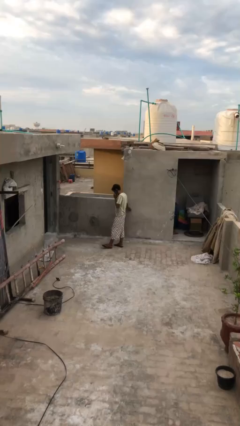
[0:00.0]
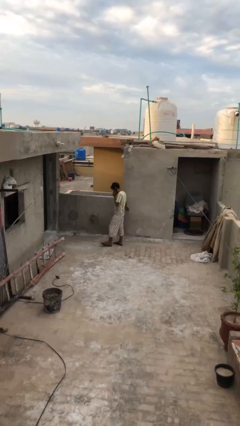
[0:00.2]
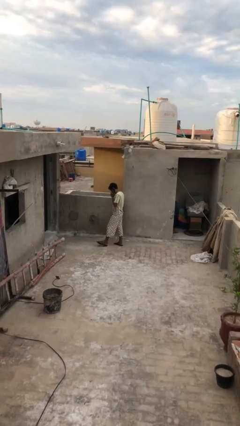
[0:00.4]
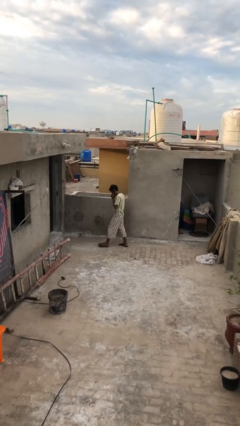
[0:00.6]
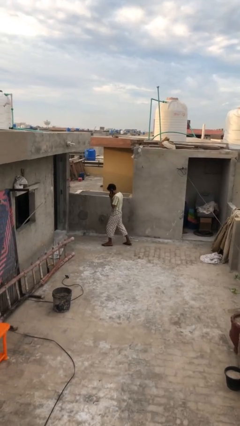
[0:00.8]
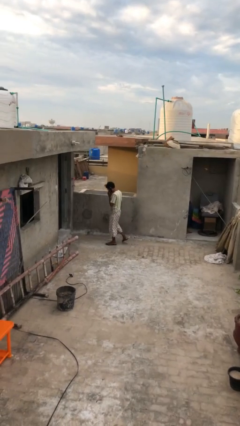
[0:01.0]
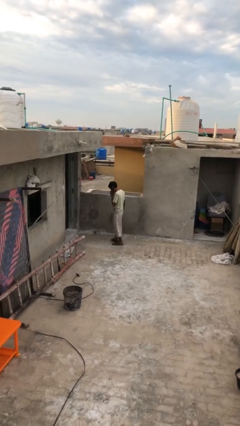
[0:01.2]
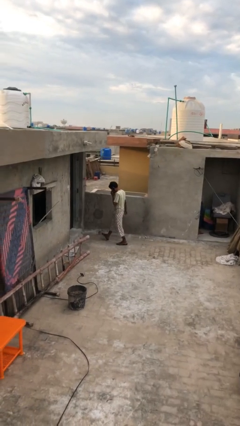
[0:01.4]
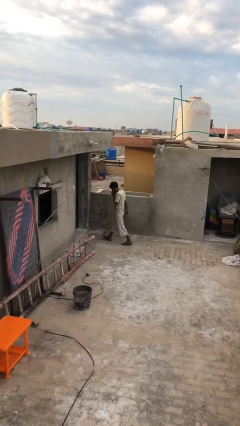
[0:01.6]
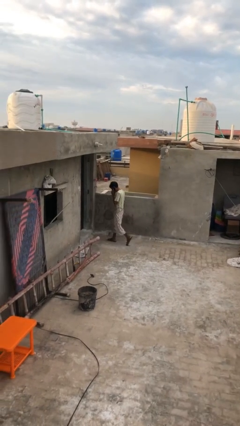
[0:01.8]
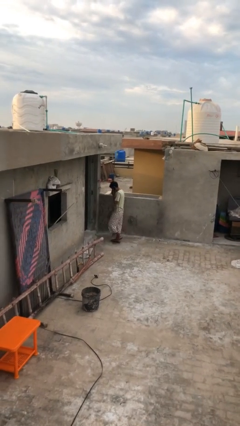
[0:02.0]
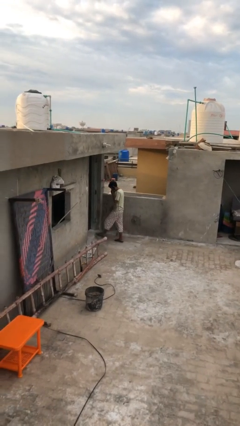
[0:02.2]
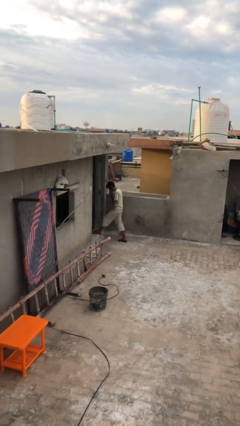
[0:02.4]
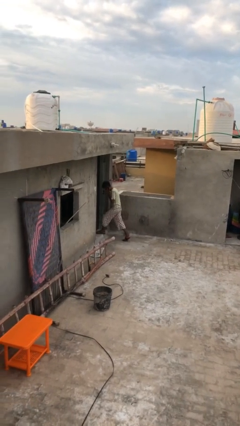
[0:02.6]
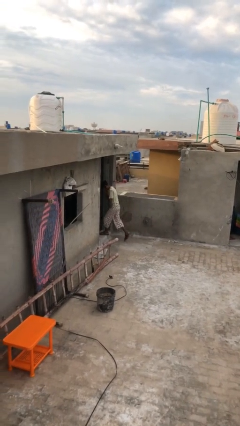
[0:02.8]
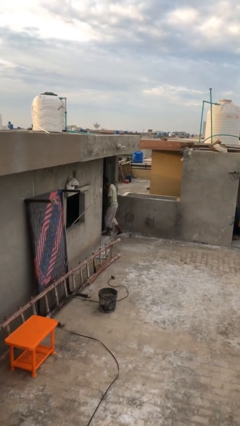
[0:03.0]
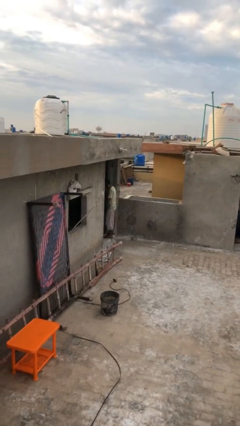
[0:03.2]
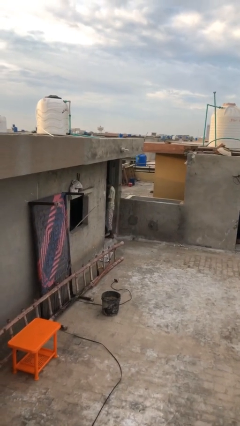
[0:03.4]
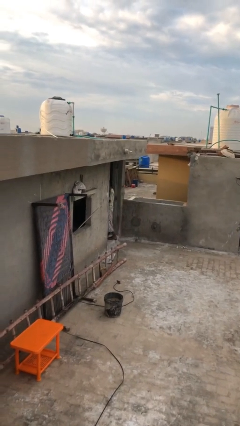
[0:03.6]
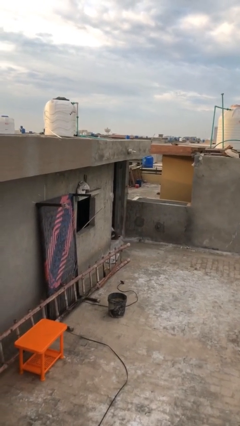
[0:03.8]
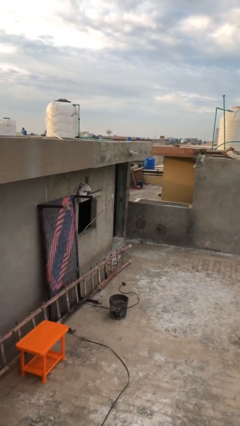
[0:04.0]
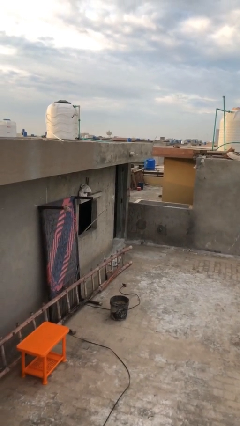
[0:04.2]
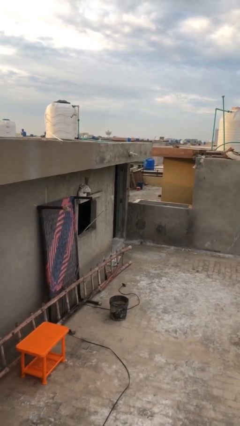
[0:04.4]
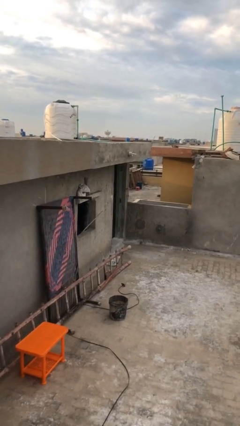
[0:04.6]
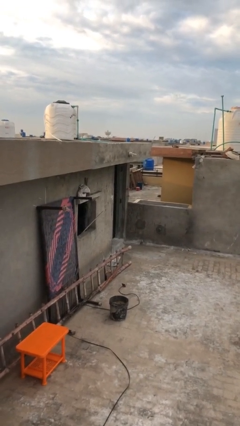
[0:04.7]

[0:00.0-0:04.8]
person exits scene through structure

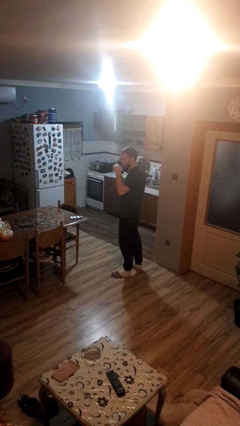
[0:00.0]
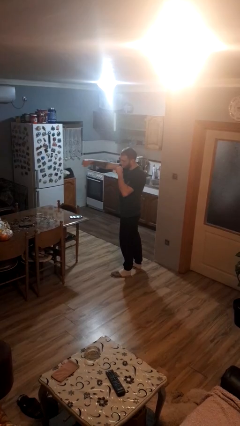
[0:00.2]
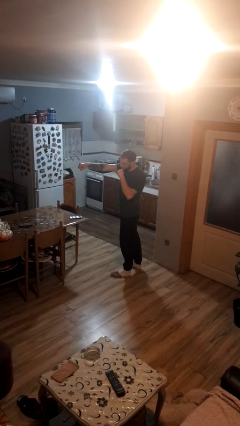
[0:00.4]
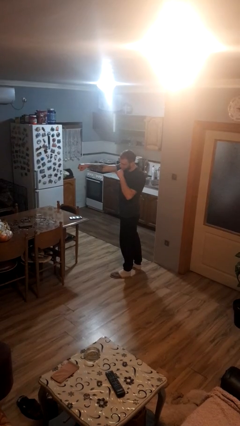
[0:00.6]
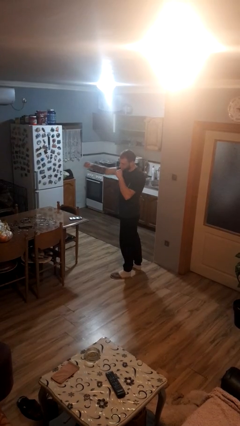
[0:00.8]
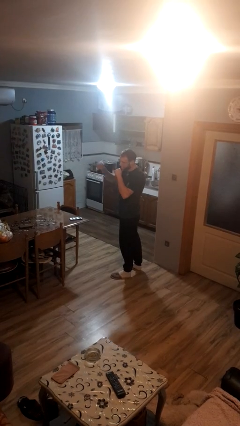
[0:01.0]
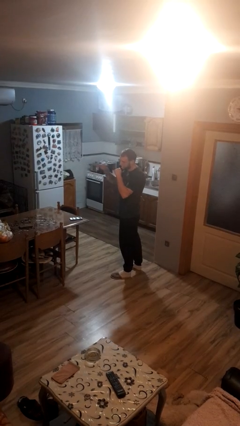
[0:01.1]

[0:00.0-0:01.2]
person punches

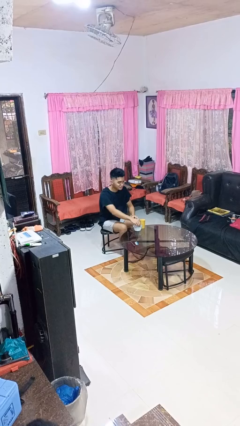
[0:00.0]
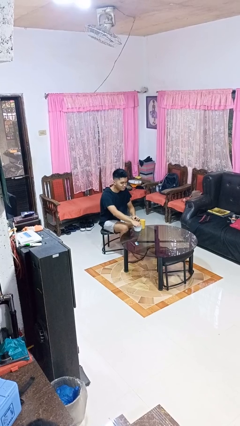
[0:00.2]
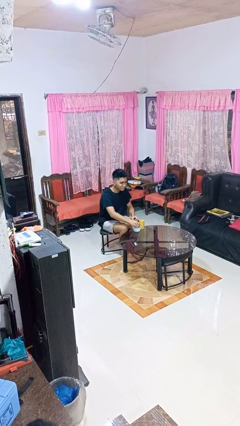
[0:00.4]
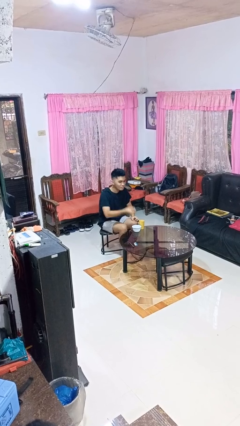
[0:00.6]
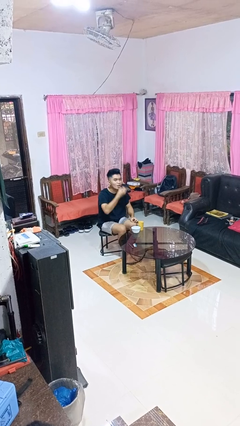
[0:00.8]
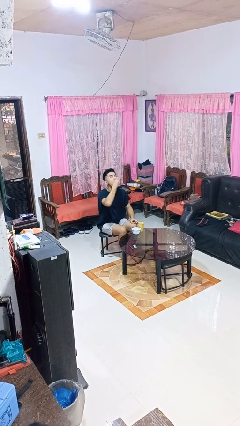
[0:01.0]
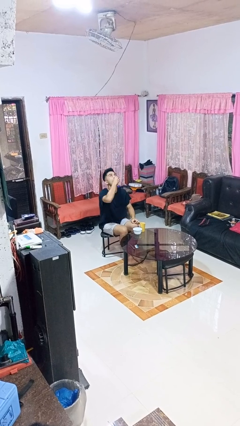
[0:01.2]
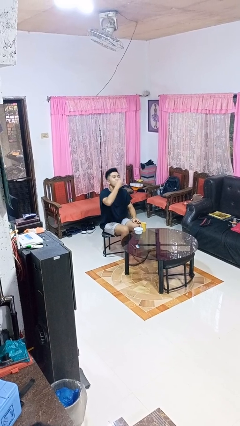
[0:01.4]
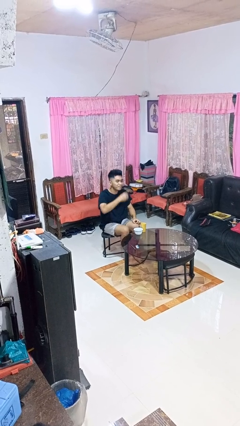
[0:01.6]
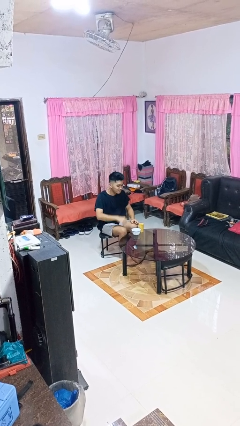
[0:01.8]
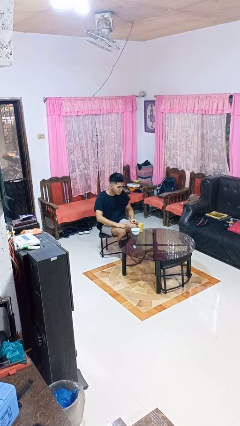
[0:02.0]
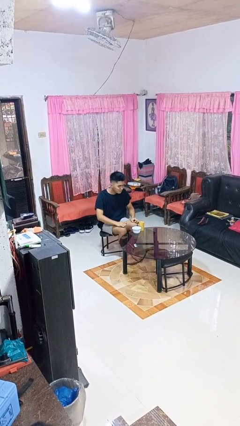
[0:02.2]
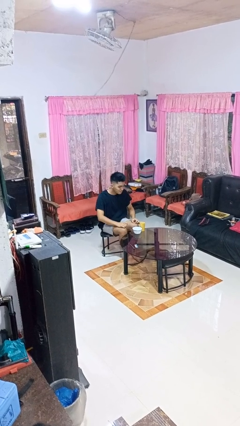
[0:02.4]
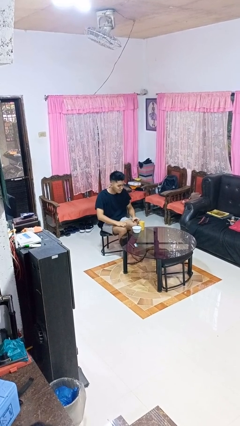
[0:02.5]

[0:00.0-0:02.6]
person takes medicine pills

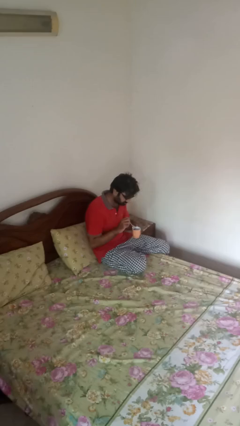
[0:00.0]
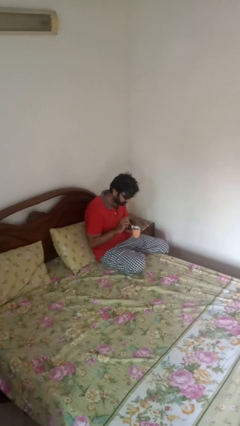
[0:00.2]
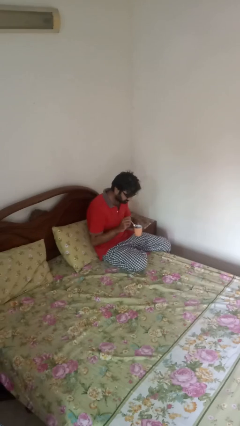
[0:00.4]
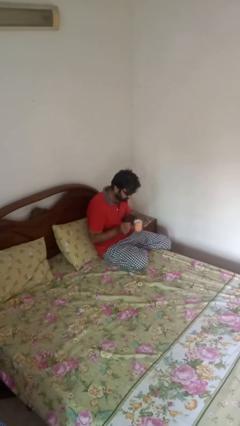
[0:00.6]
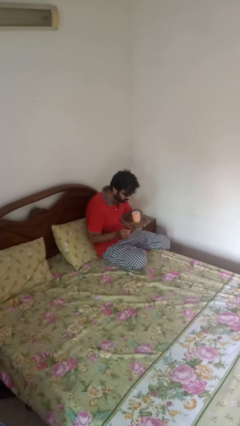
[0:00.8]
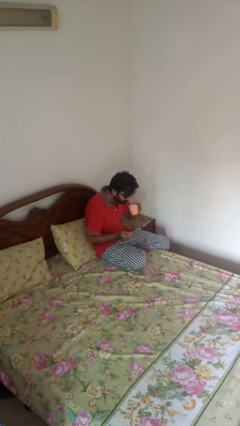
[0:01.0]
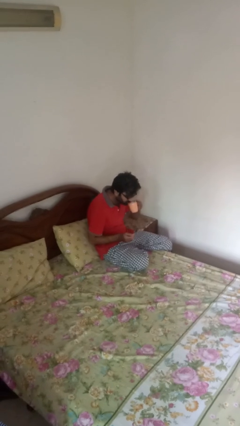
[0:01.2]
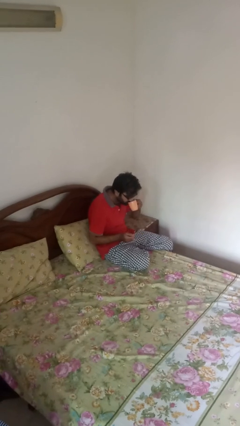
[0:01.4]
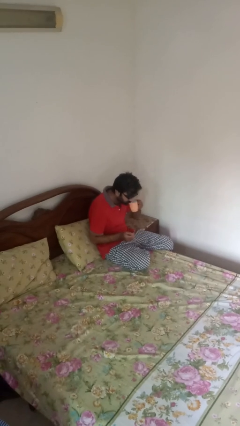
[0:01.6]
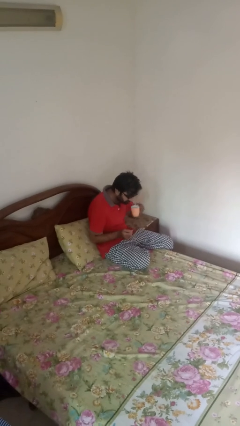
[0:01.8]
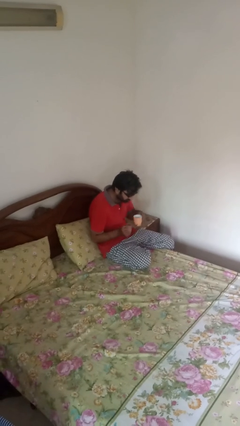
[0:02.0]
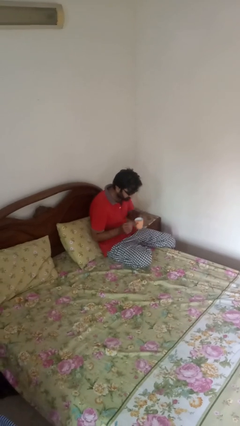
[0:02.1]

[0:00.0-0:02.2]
person drinks from mug

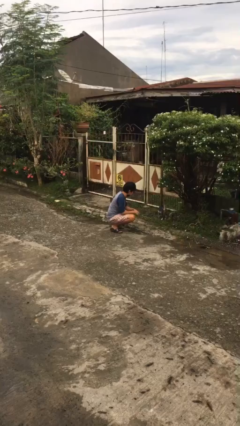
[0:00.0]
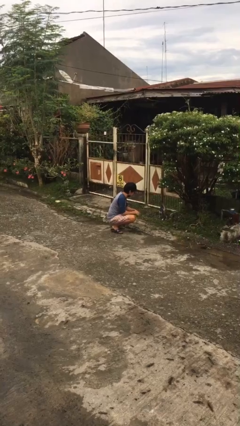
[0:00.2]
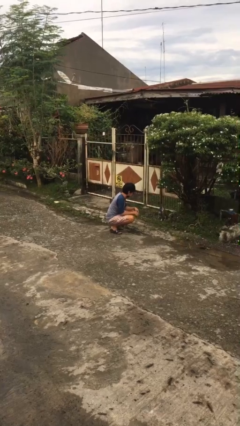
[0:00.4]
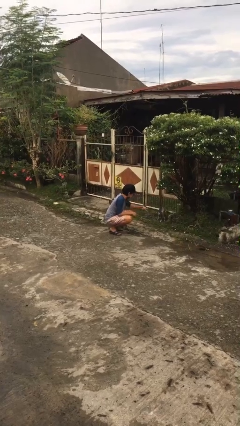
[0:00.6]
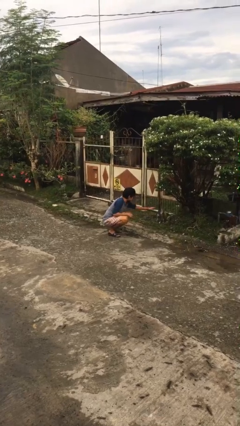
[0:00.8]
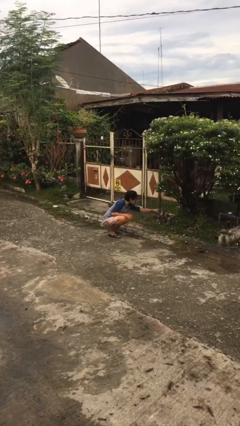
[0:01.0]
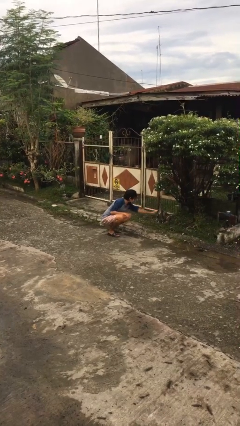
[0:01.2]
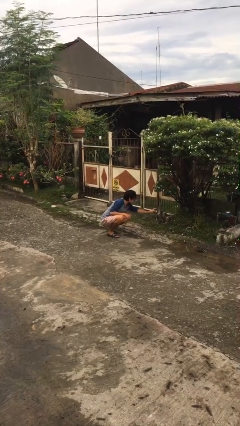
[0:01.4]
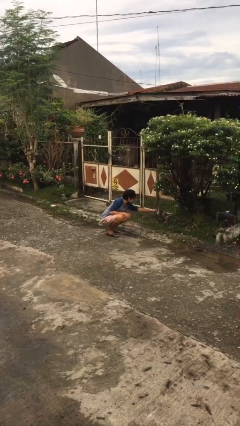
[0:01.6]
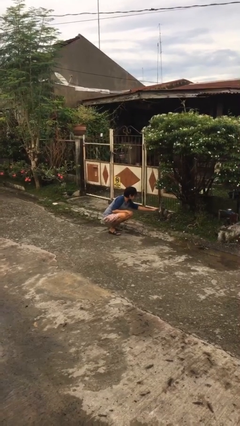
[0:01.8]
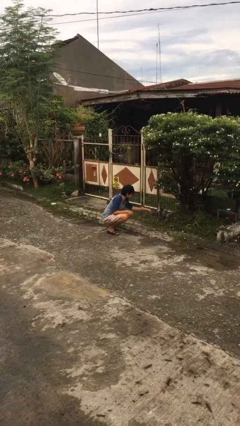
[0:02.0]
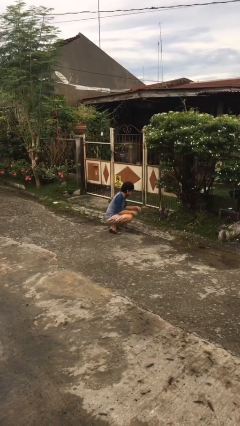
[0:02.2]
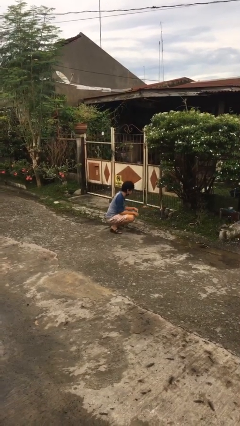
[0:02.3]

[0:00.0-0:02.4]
person pets cat

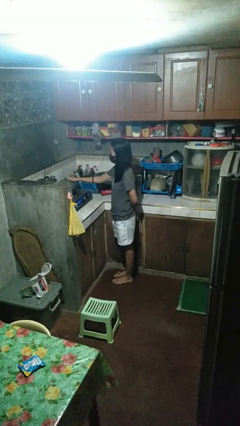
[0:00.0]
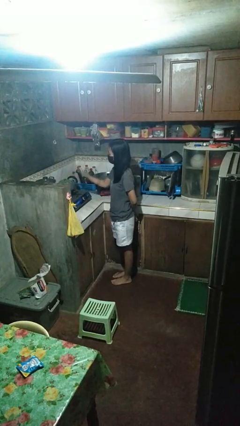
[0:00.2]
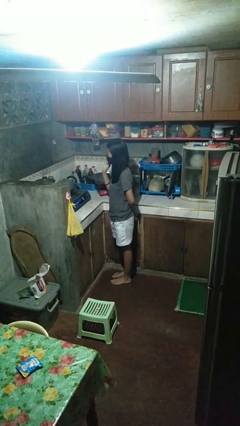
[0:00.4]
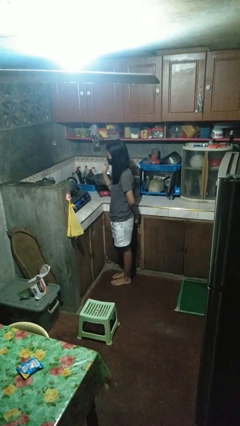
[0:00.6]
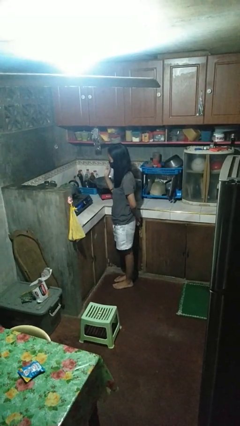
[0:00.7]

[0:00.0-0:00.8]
person burns hand

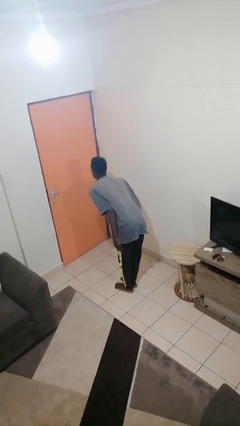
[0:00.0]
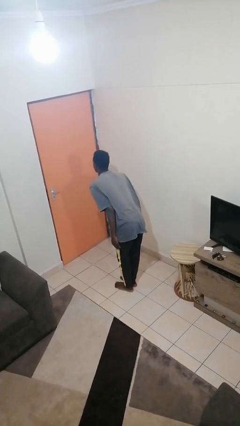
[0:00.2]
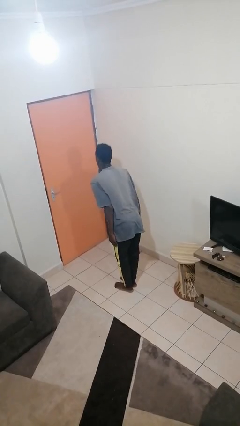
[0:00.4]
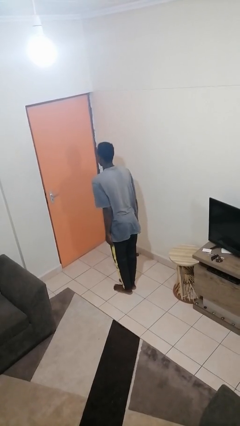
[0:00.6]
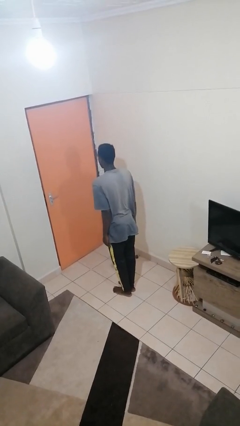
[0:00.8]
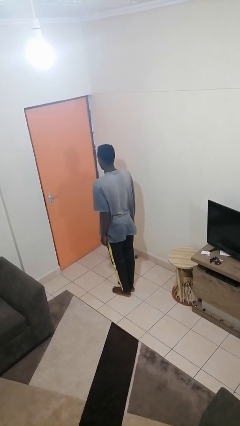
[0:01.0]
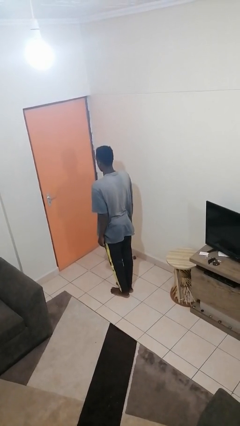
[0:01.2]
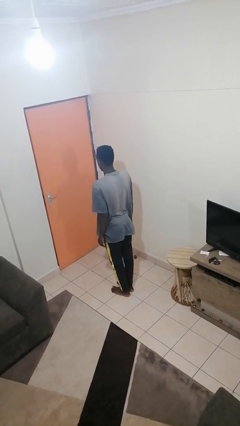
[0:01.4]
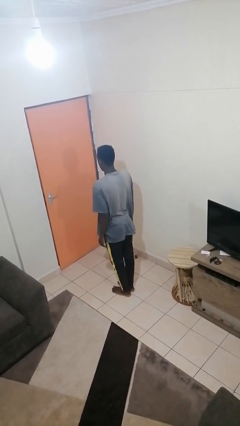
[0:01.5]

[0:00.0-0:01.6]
person bows

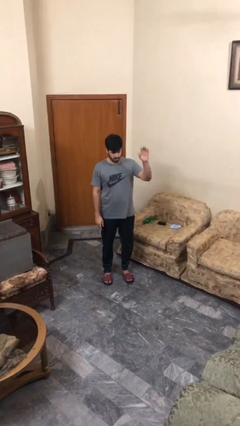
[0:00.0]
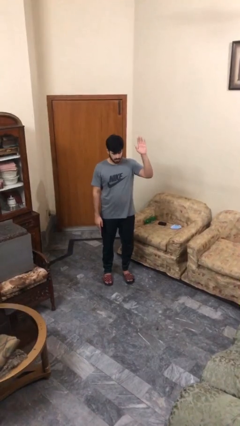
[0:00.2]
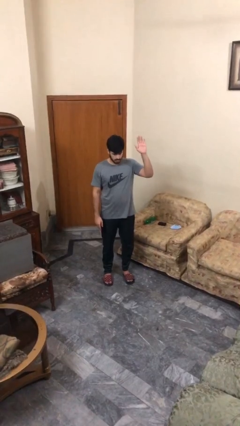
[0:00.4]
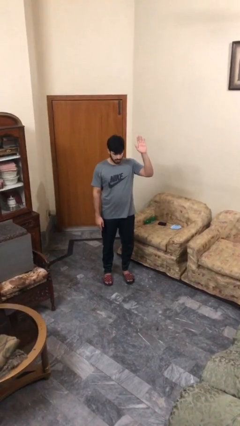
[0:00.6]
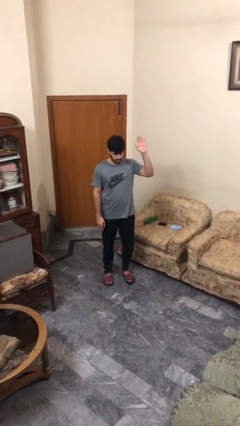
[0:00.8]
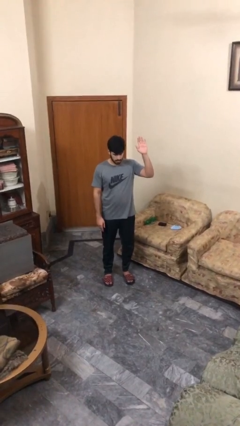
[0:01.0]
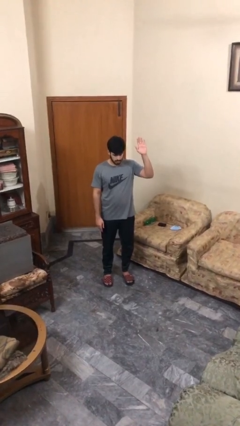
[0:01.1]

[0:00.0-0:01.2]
person gestures raise hand
